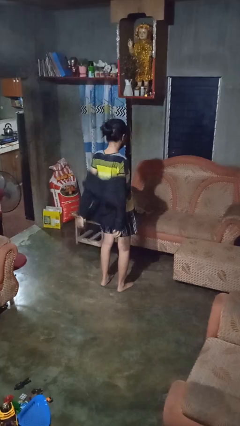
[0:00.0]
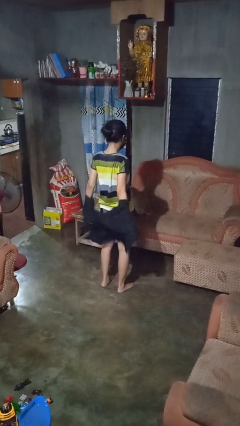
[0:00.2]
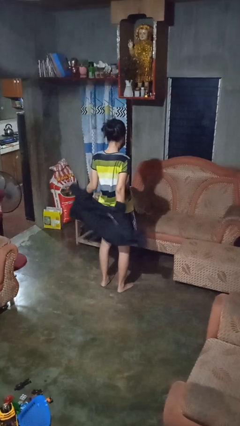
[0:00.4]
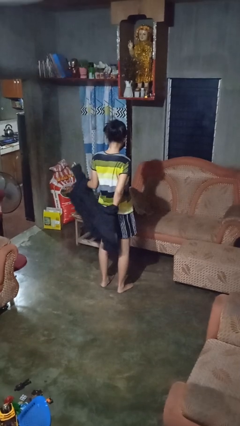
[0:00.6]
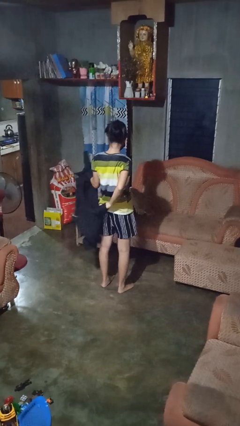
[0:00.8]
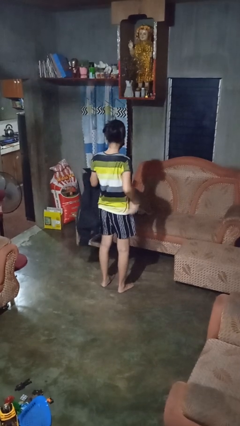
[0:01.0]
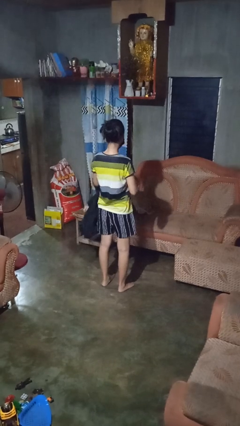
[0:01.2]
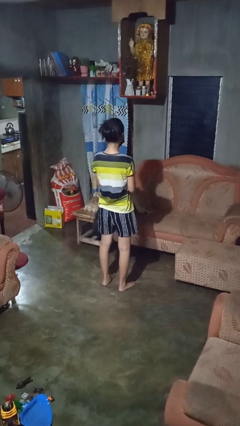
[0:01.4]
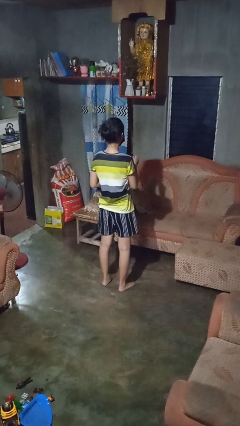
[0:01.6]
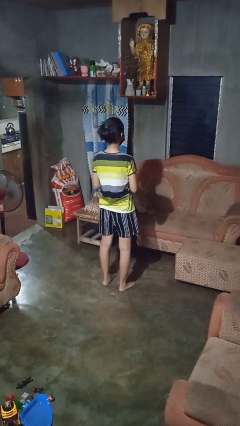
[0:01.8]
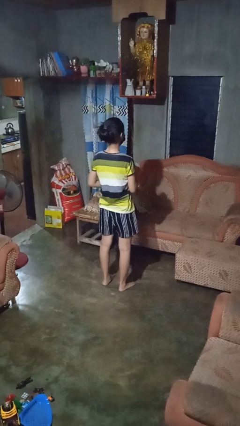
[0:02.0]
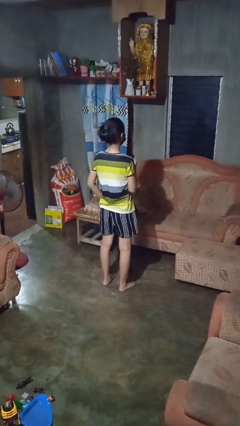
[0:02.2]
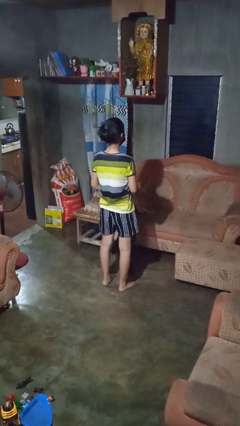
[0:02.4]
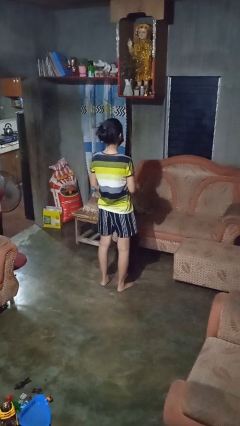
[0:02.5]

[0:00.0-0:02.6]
person takes off shirt

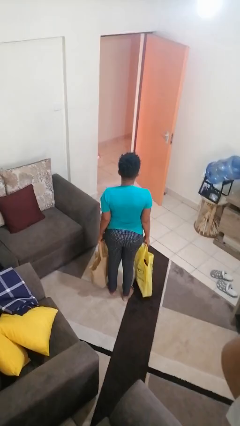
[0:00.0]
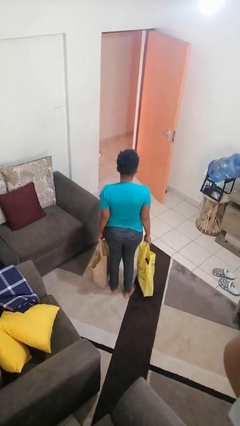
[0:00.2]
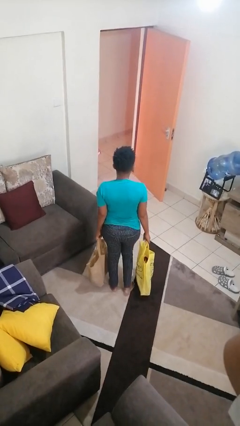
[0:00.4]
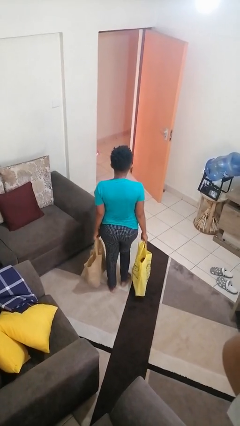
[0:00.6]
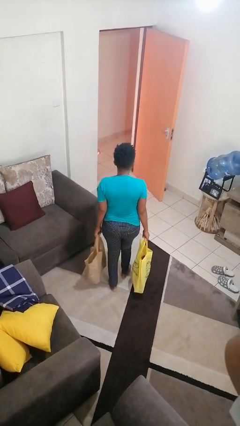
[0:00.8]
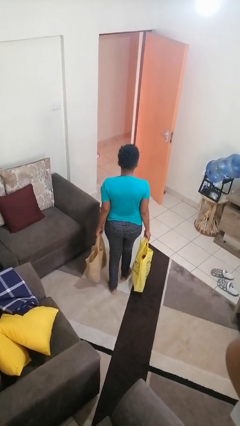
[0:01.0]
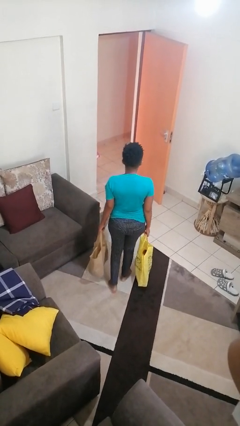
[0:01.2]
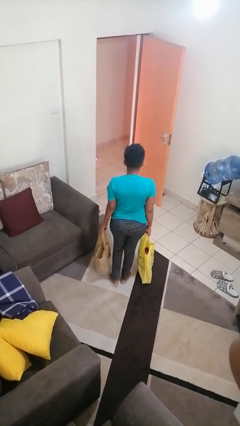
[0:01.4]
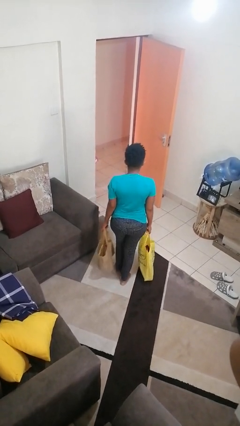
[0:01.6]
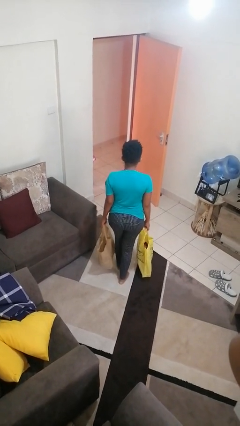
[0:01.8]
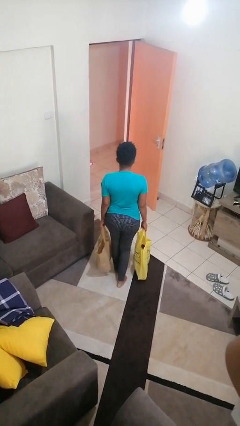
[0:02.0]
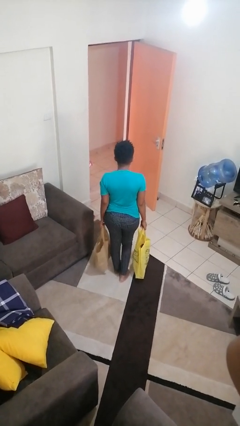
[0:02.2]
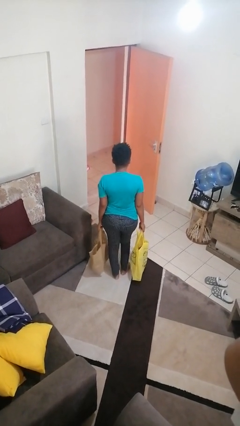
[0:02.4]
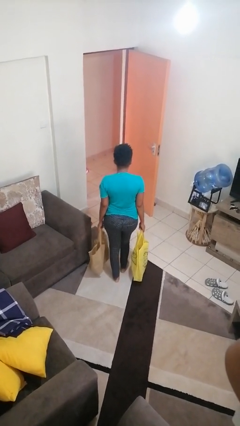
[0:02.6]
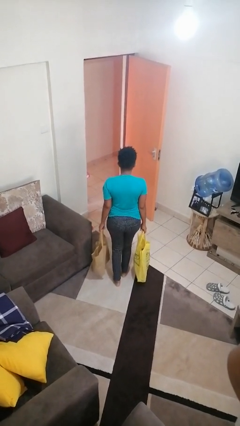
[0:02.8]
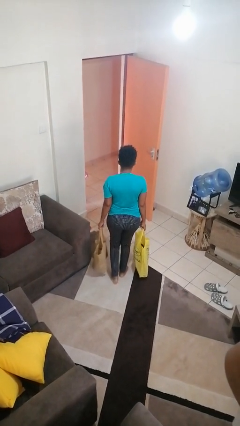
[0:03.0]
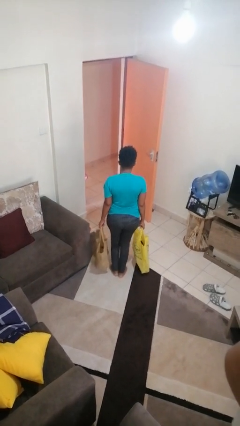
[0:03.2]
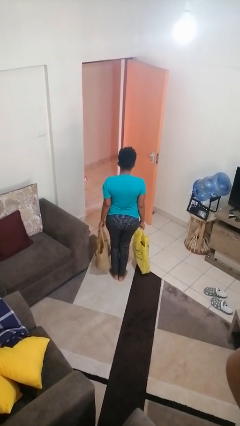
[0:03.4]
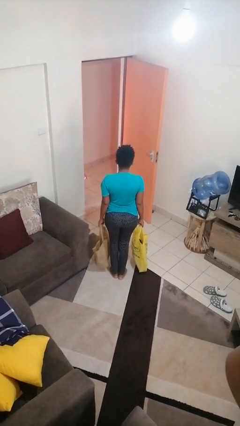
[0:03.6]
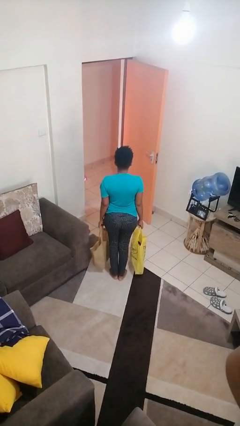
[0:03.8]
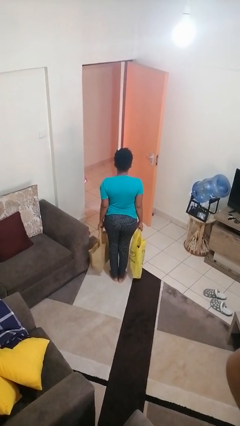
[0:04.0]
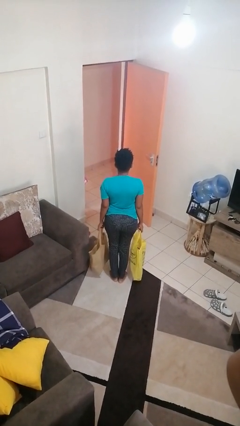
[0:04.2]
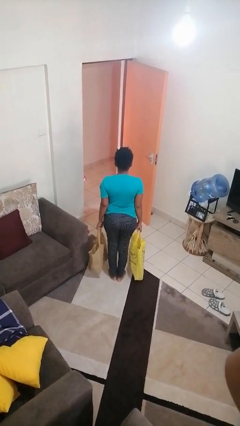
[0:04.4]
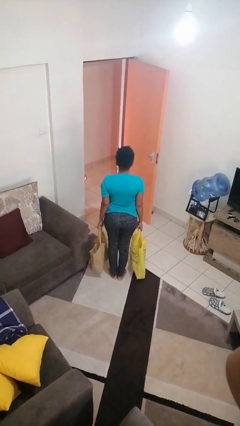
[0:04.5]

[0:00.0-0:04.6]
person carries groceries

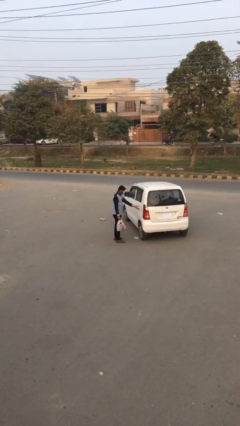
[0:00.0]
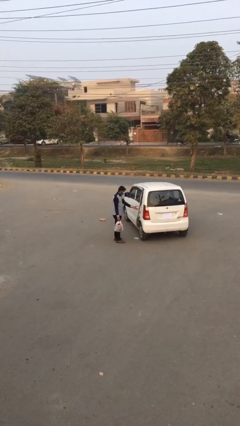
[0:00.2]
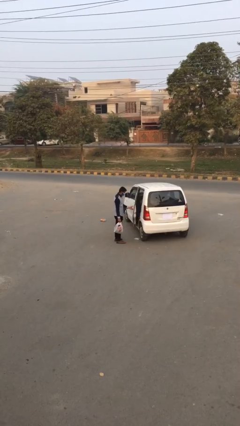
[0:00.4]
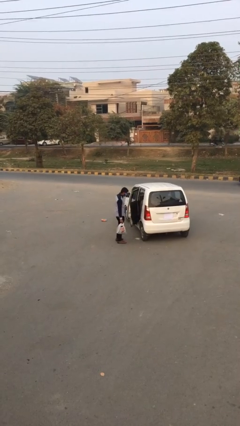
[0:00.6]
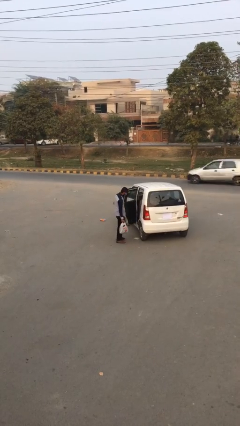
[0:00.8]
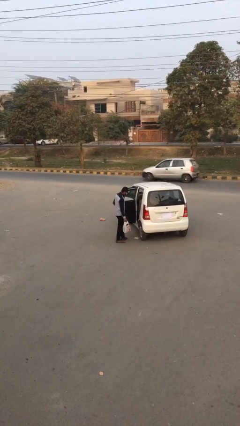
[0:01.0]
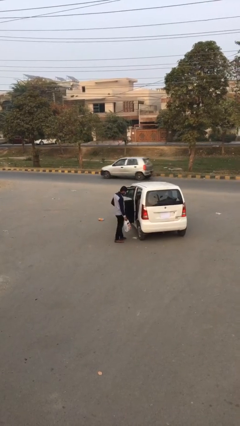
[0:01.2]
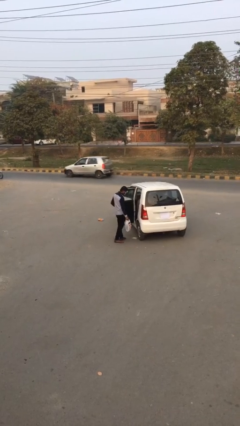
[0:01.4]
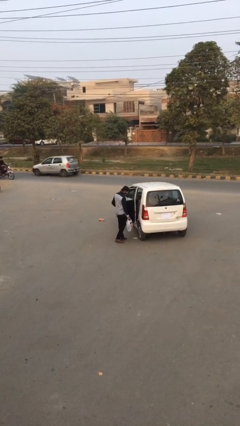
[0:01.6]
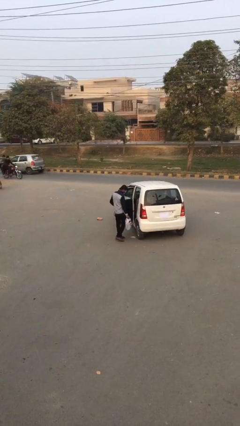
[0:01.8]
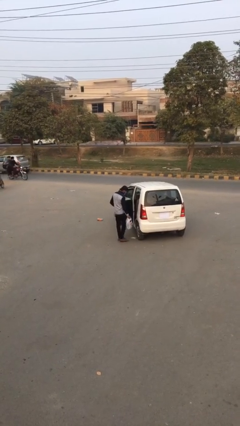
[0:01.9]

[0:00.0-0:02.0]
person opens car door

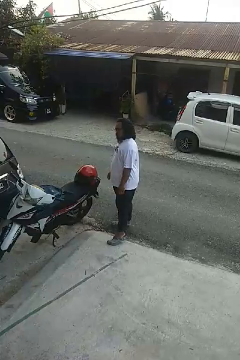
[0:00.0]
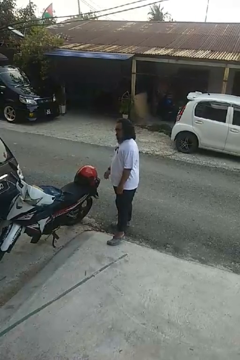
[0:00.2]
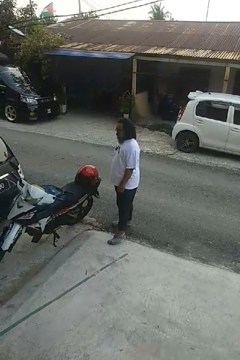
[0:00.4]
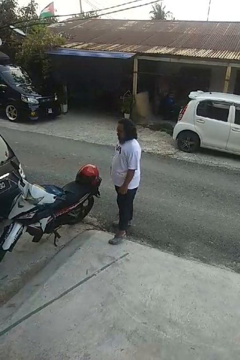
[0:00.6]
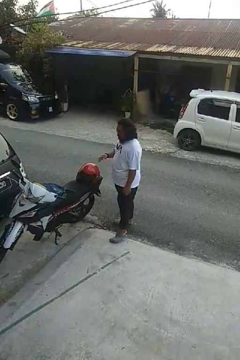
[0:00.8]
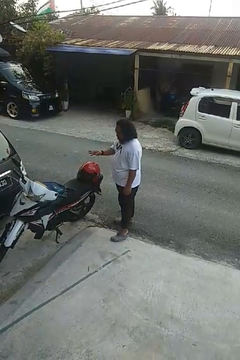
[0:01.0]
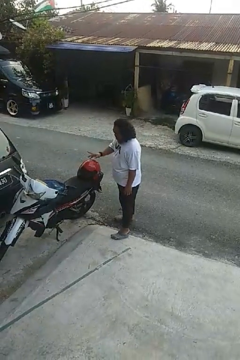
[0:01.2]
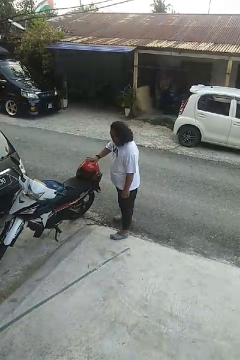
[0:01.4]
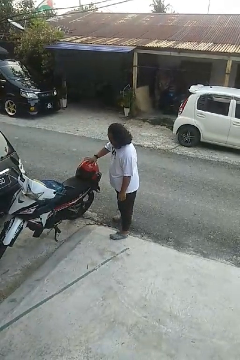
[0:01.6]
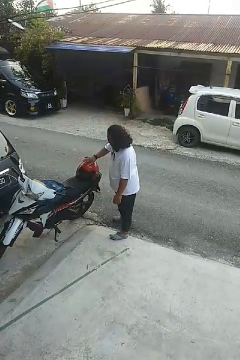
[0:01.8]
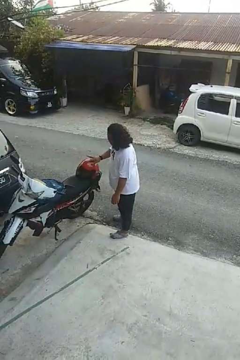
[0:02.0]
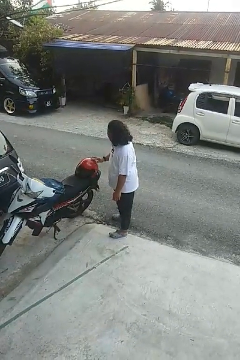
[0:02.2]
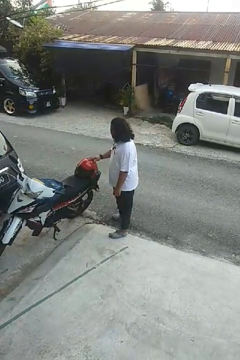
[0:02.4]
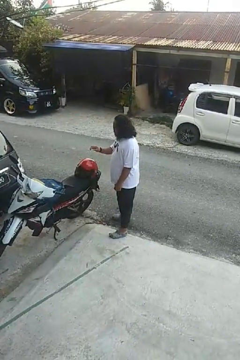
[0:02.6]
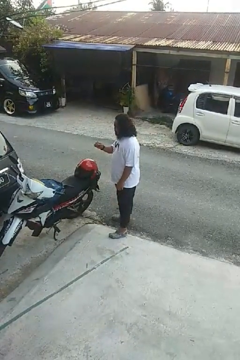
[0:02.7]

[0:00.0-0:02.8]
person taps object with finger

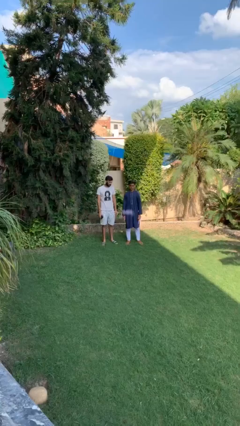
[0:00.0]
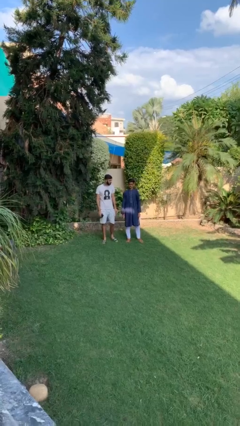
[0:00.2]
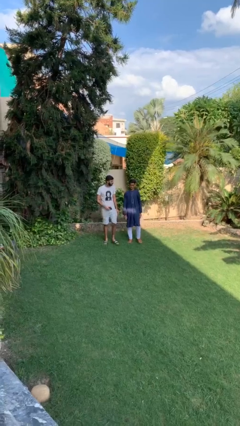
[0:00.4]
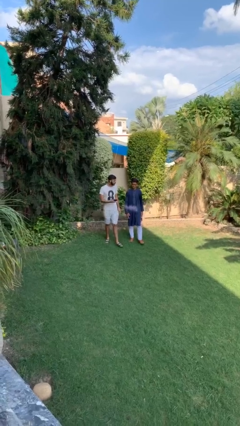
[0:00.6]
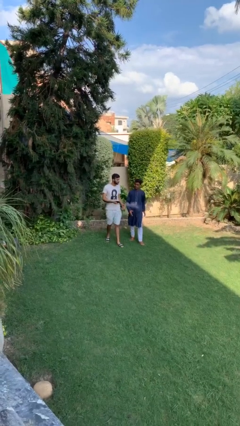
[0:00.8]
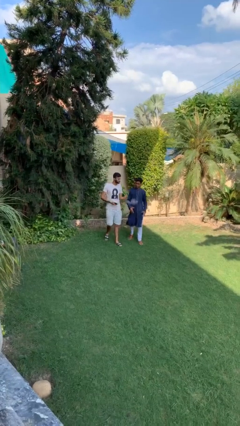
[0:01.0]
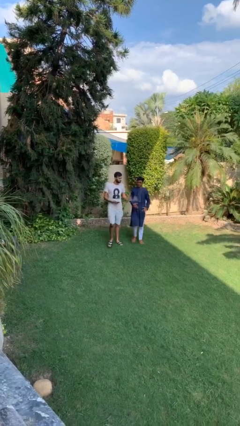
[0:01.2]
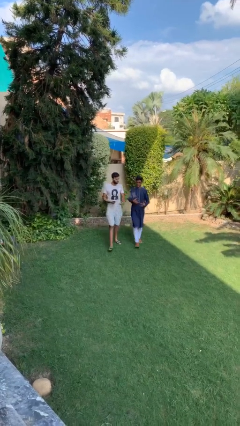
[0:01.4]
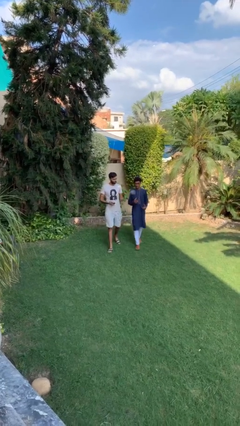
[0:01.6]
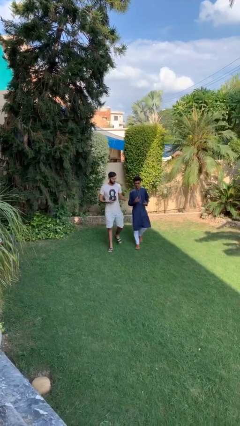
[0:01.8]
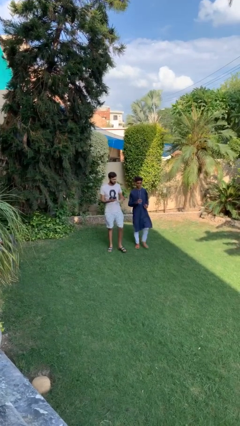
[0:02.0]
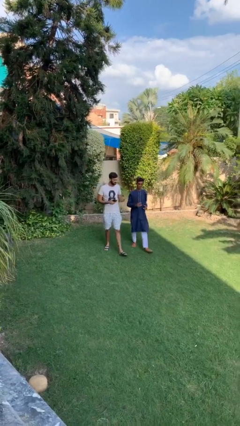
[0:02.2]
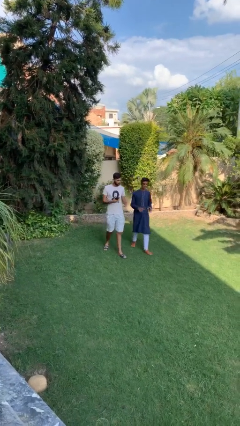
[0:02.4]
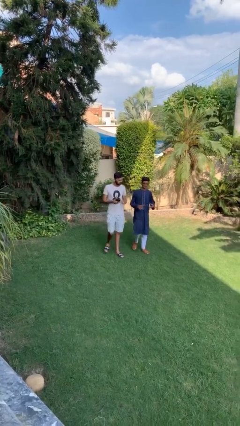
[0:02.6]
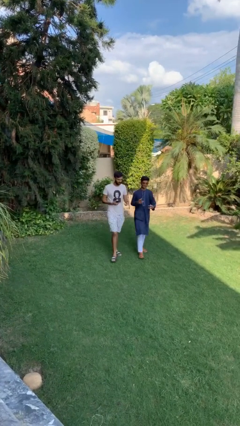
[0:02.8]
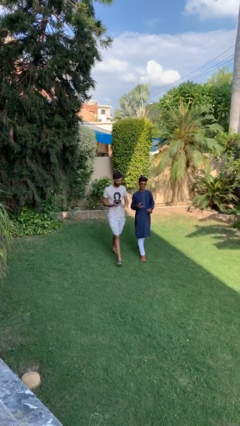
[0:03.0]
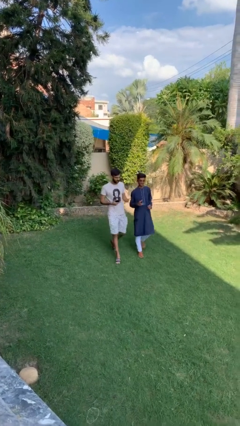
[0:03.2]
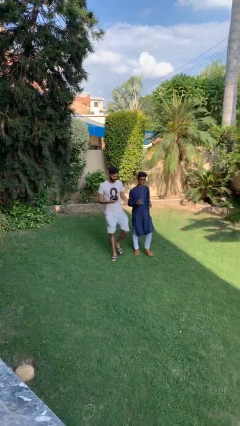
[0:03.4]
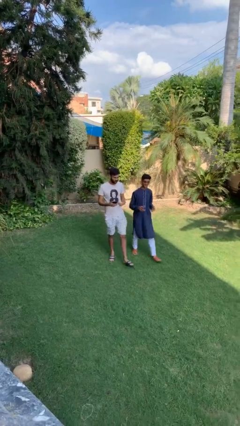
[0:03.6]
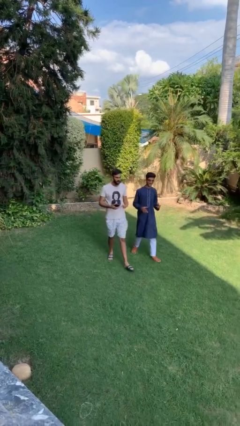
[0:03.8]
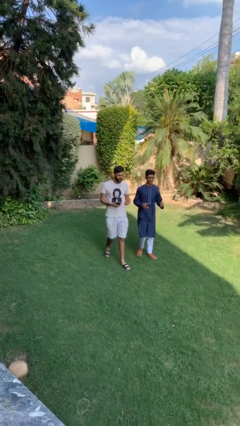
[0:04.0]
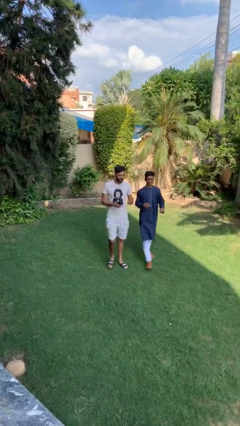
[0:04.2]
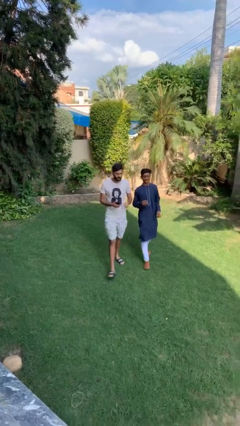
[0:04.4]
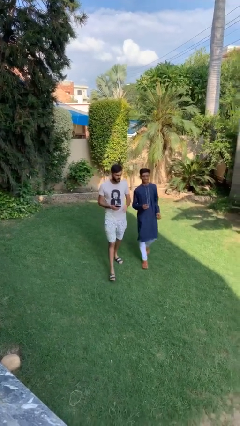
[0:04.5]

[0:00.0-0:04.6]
person talks to person

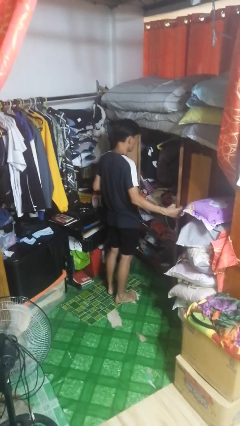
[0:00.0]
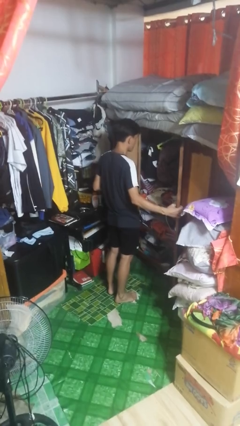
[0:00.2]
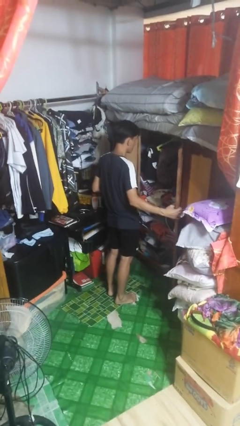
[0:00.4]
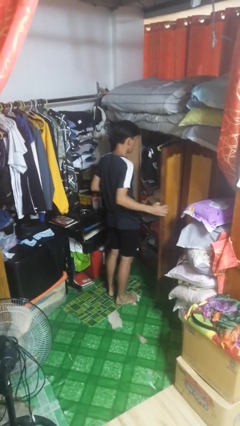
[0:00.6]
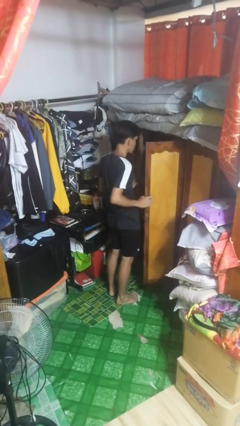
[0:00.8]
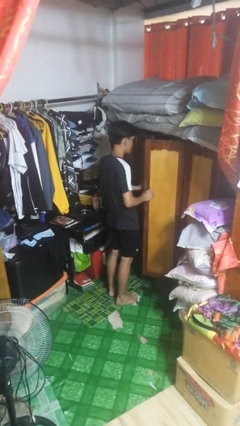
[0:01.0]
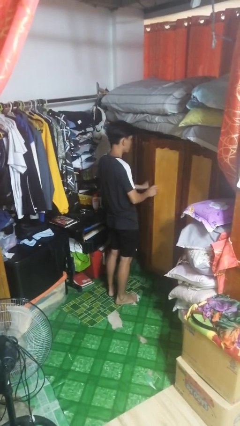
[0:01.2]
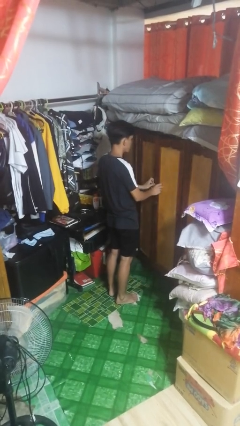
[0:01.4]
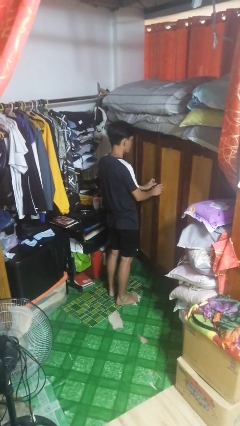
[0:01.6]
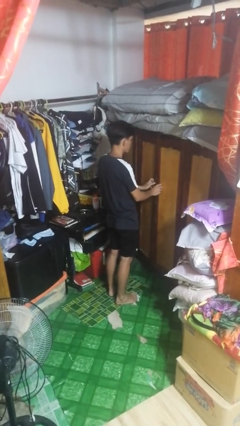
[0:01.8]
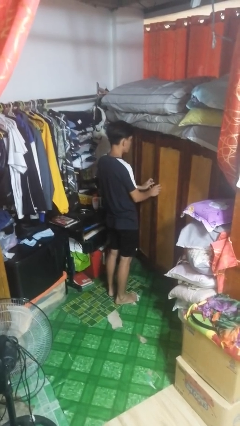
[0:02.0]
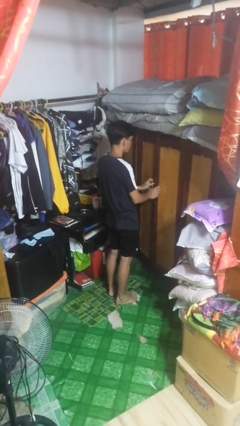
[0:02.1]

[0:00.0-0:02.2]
person closes dresser drawer
